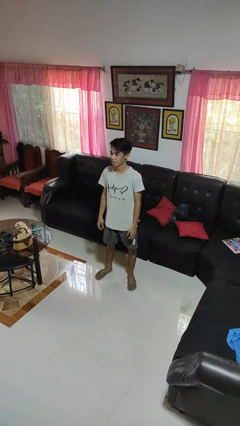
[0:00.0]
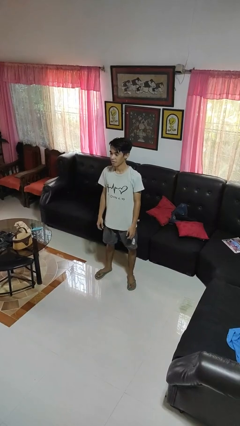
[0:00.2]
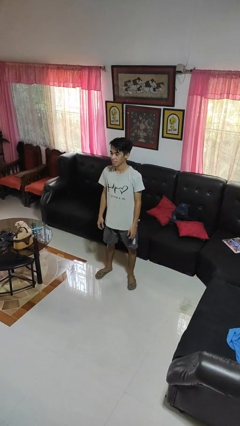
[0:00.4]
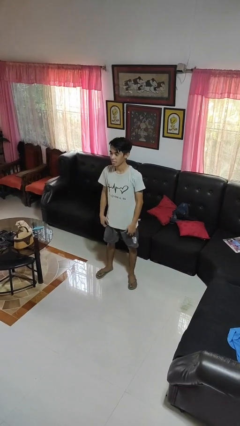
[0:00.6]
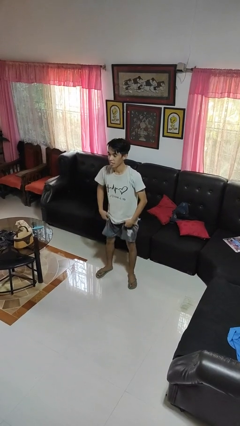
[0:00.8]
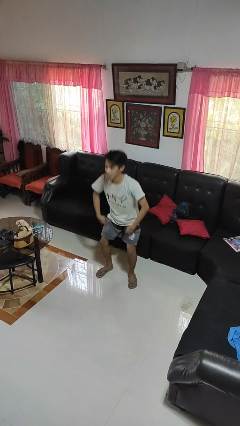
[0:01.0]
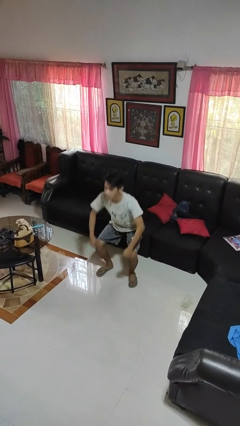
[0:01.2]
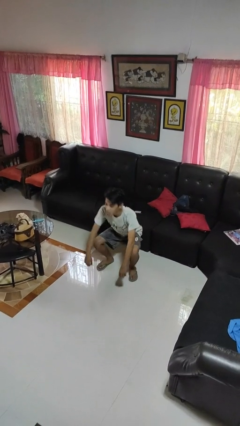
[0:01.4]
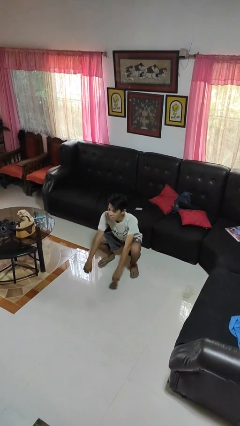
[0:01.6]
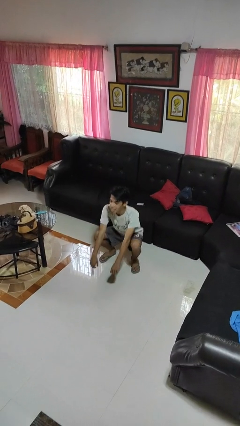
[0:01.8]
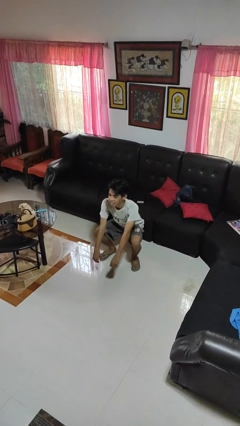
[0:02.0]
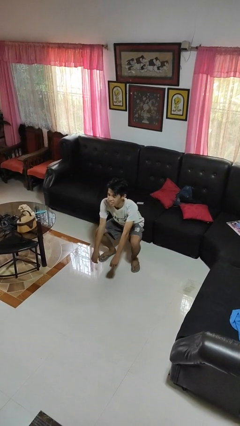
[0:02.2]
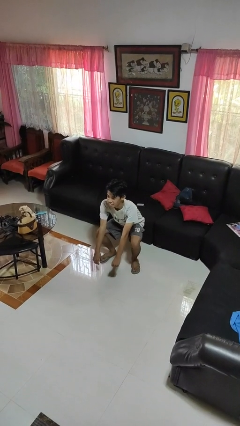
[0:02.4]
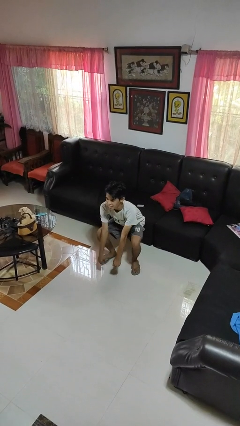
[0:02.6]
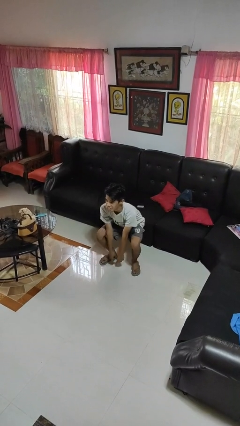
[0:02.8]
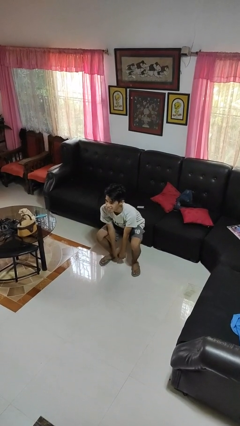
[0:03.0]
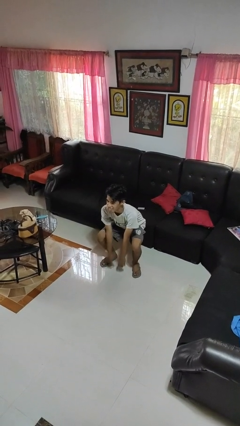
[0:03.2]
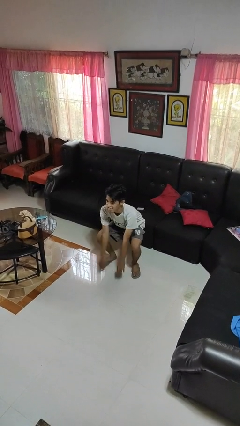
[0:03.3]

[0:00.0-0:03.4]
person squats

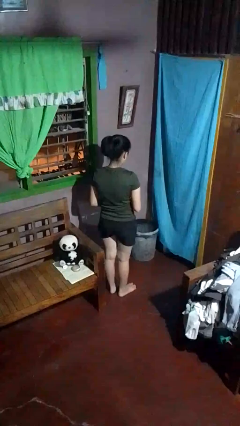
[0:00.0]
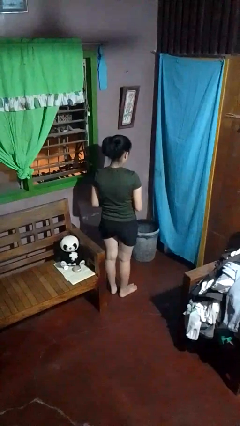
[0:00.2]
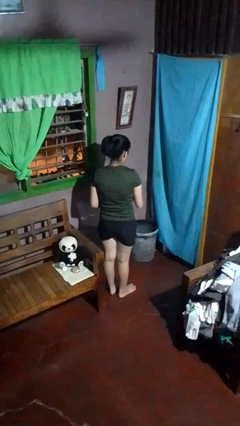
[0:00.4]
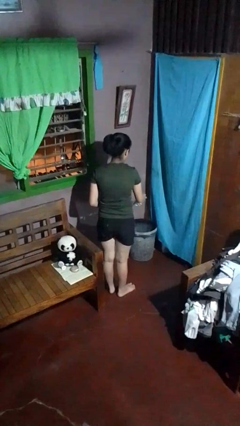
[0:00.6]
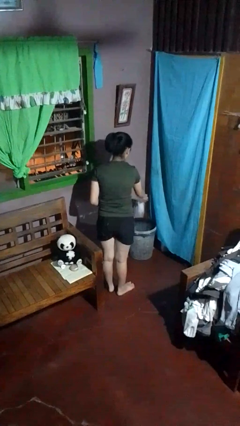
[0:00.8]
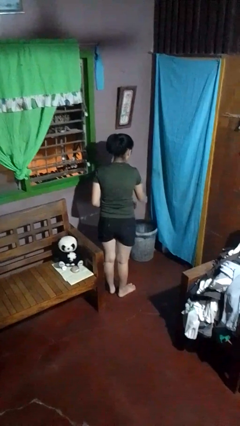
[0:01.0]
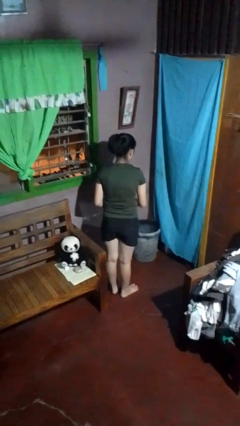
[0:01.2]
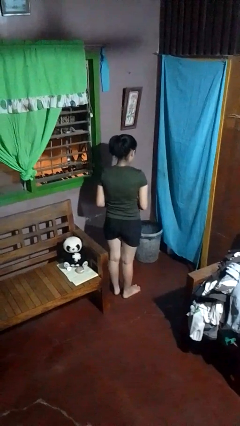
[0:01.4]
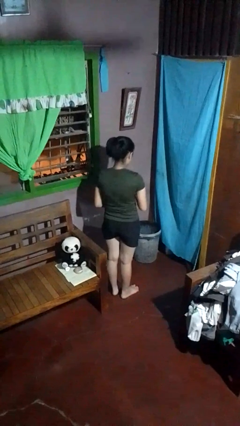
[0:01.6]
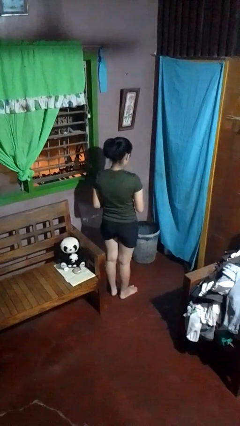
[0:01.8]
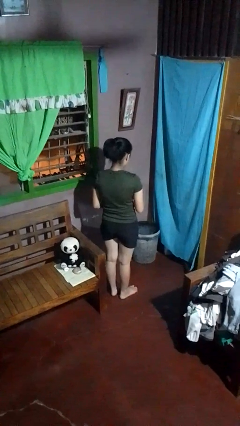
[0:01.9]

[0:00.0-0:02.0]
person discards trash

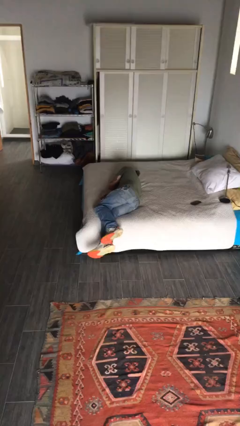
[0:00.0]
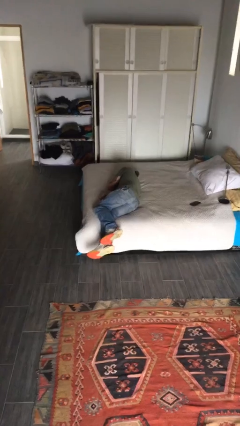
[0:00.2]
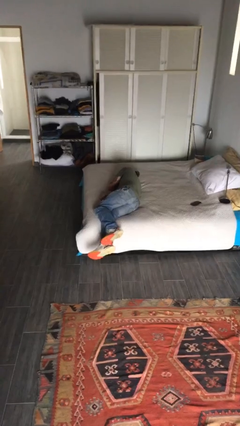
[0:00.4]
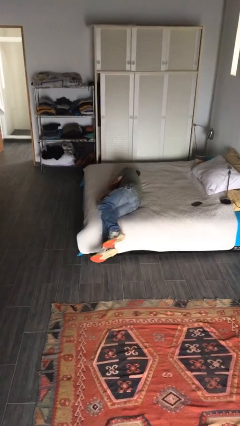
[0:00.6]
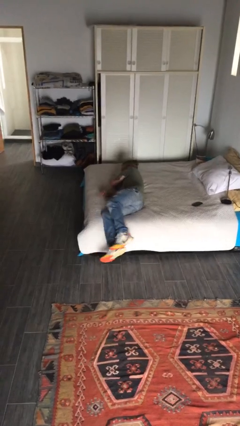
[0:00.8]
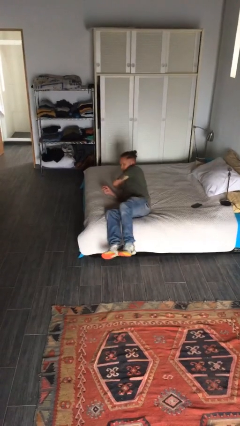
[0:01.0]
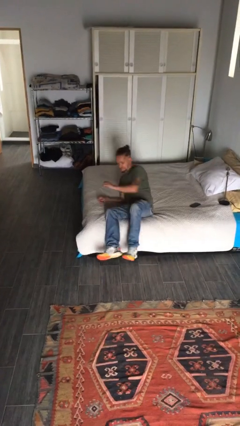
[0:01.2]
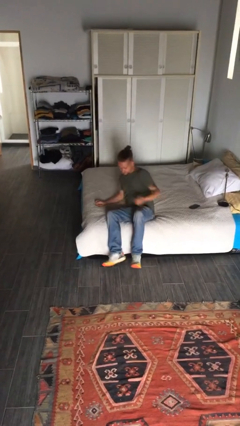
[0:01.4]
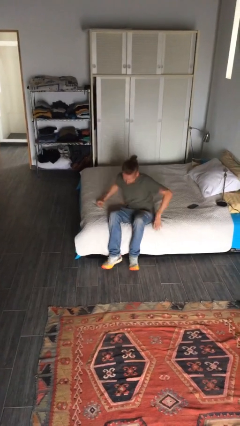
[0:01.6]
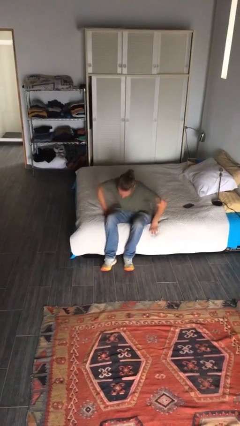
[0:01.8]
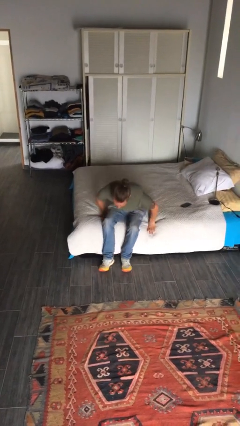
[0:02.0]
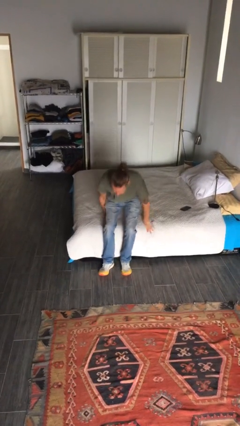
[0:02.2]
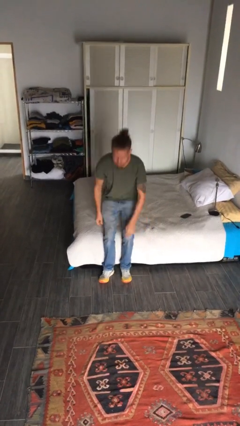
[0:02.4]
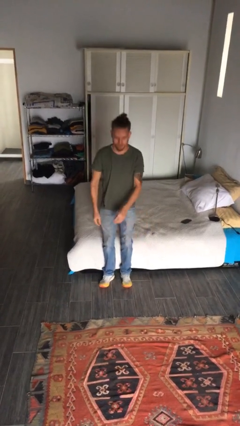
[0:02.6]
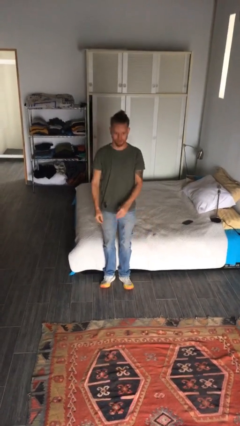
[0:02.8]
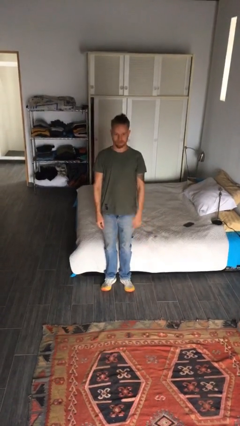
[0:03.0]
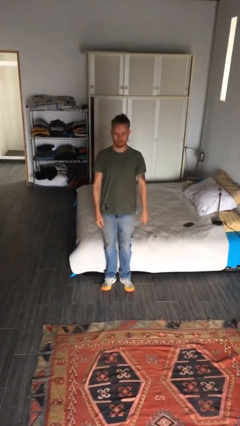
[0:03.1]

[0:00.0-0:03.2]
person stands up

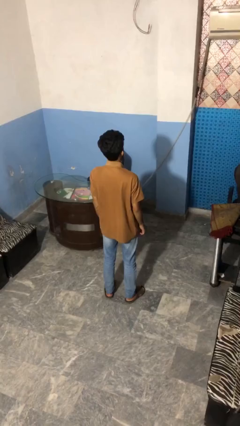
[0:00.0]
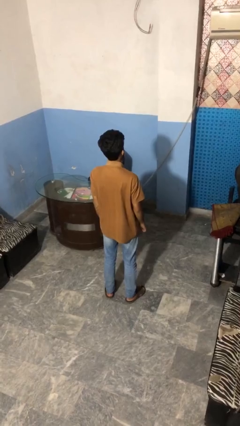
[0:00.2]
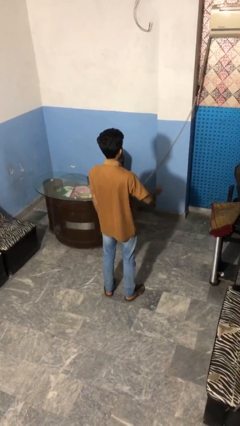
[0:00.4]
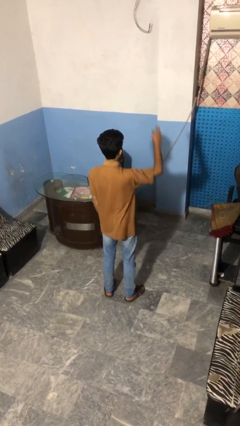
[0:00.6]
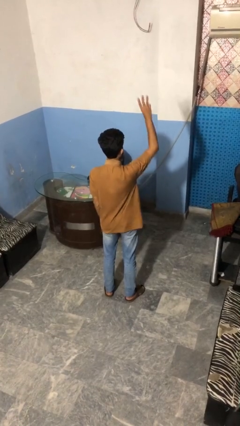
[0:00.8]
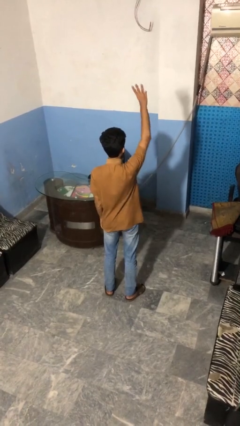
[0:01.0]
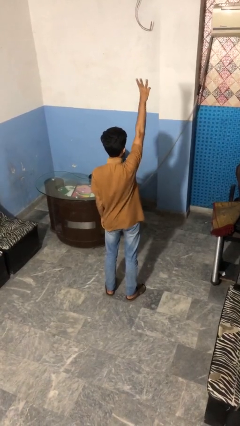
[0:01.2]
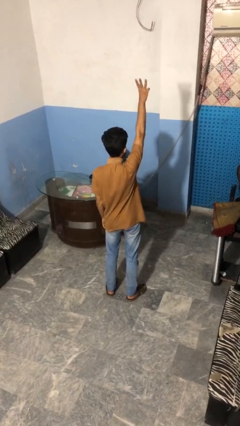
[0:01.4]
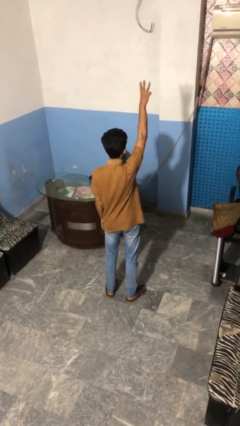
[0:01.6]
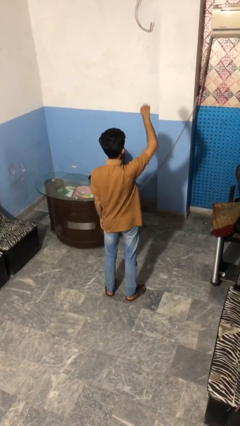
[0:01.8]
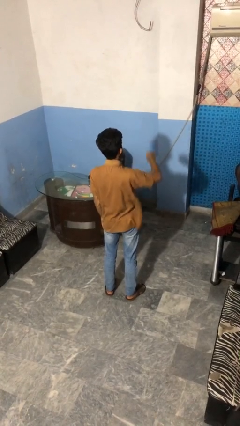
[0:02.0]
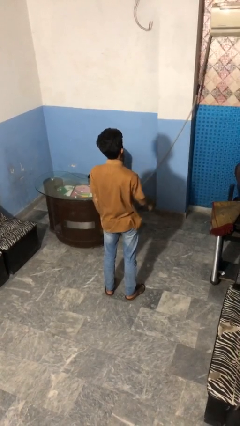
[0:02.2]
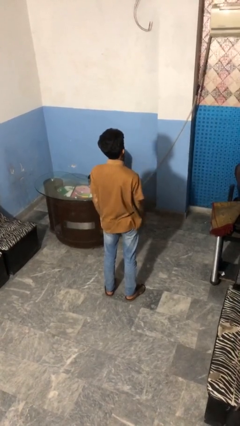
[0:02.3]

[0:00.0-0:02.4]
person gestures number three

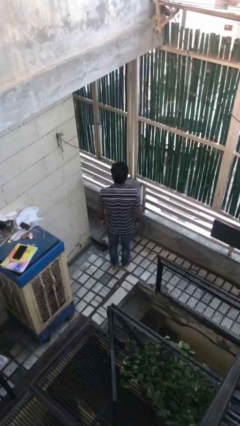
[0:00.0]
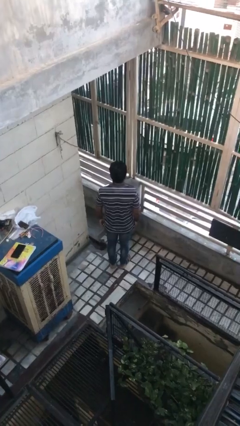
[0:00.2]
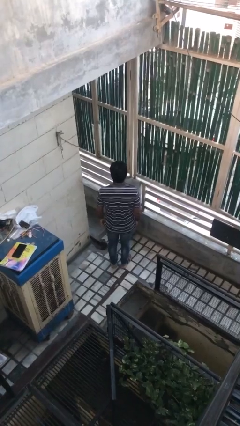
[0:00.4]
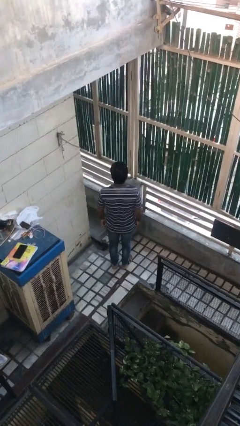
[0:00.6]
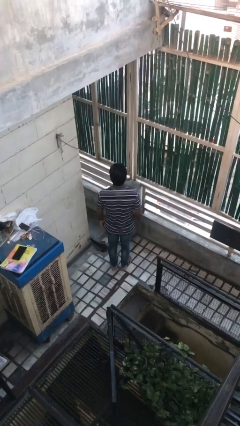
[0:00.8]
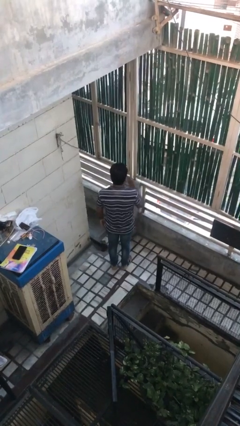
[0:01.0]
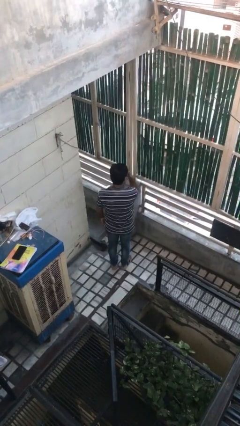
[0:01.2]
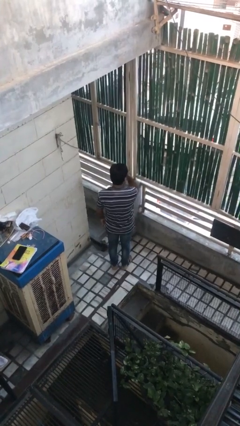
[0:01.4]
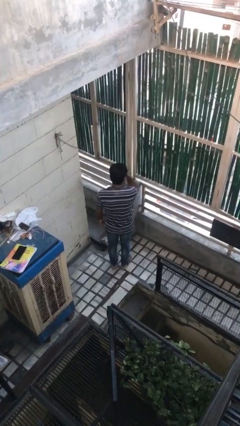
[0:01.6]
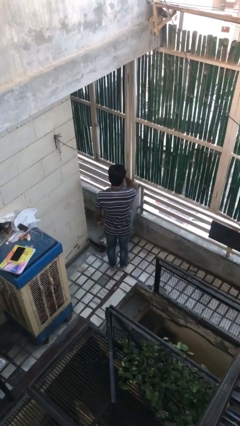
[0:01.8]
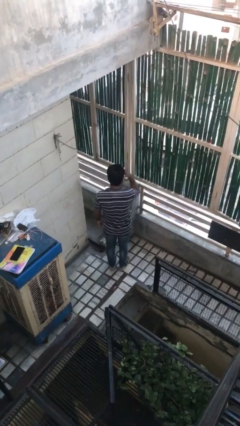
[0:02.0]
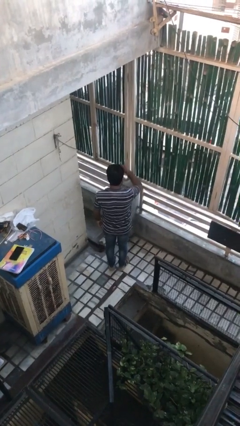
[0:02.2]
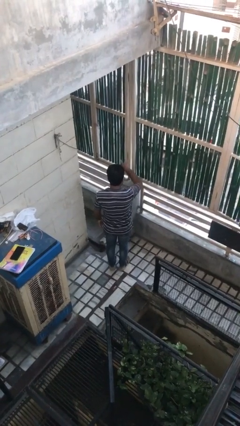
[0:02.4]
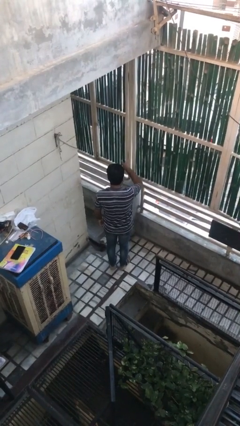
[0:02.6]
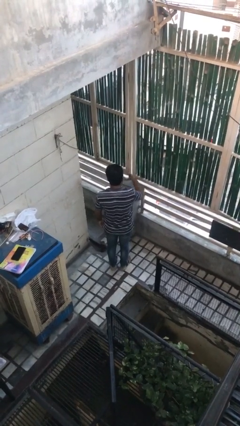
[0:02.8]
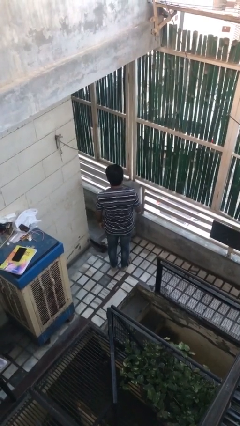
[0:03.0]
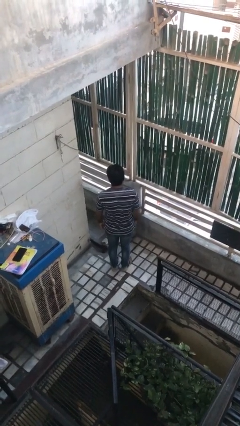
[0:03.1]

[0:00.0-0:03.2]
person gestures watch closely

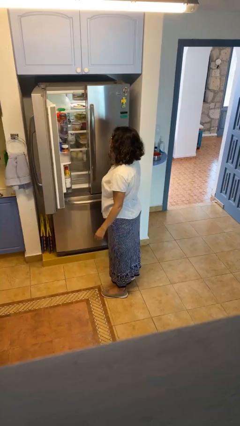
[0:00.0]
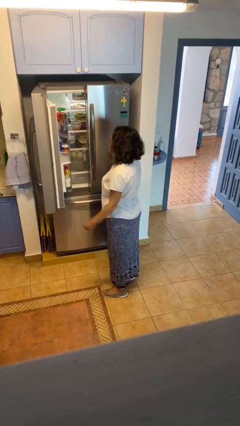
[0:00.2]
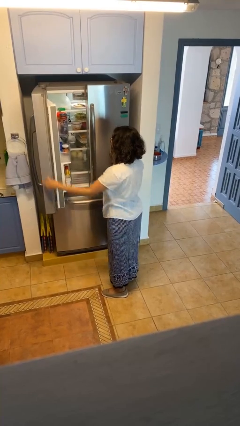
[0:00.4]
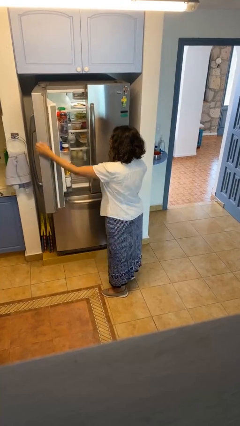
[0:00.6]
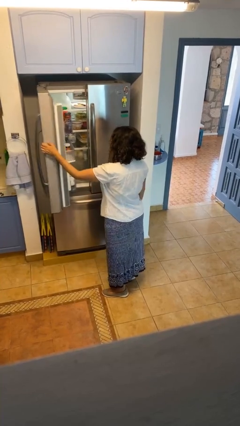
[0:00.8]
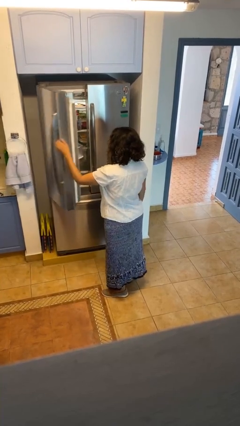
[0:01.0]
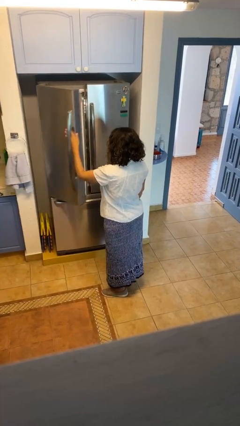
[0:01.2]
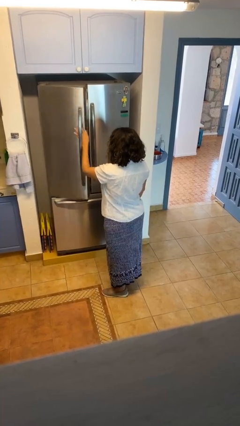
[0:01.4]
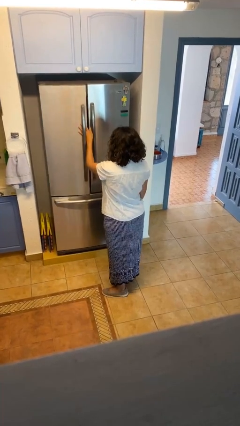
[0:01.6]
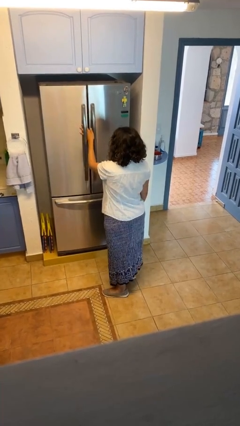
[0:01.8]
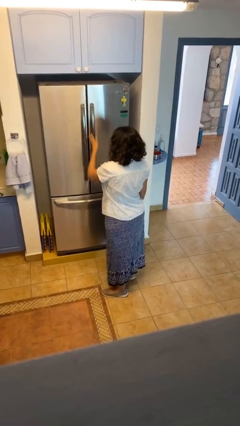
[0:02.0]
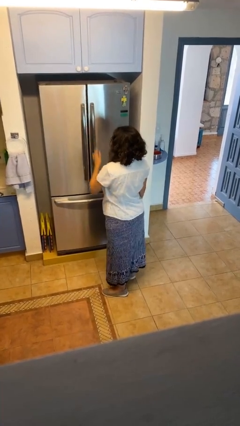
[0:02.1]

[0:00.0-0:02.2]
person closes refrigerator

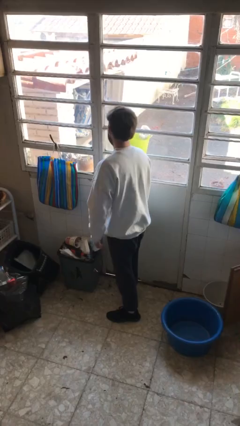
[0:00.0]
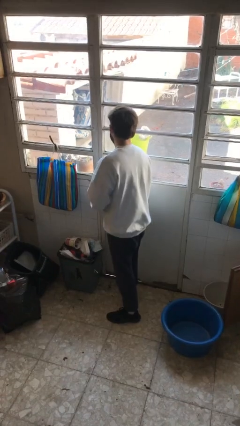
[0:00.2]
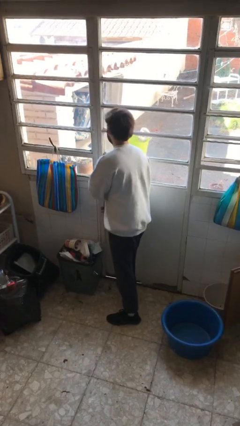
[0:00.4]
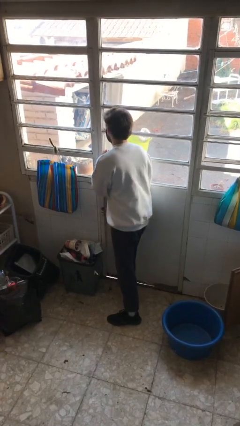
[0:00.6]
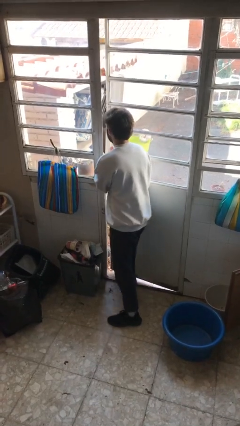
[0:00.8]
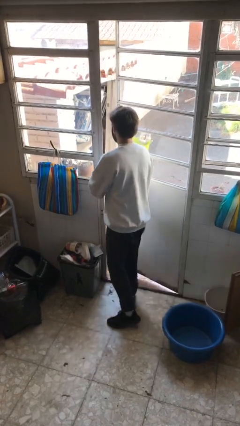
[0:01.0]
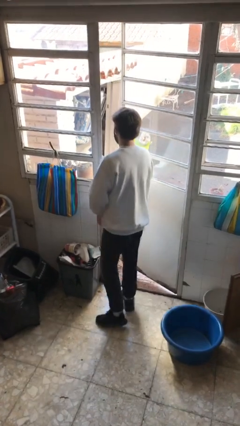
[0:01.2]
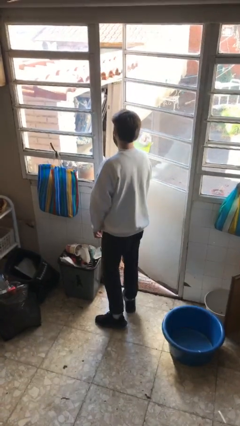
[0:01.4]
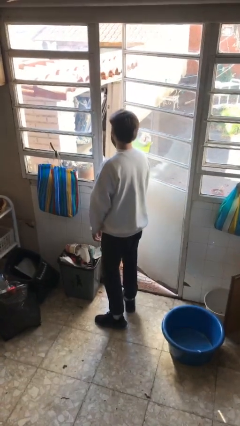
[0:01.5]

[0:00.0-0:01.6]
person opens facility door
